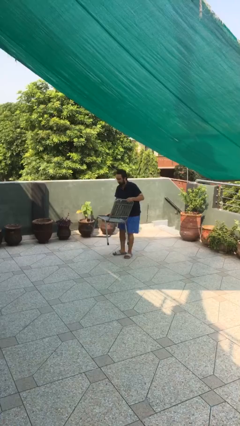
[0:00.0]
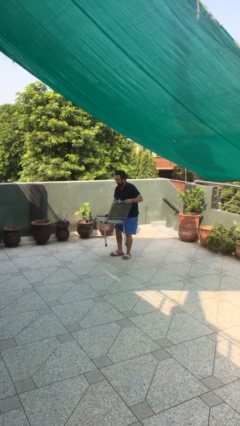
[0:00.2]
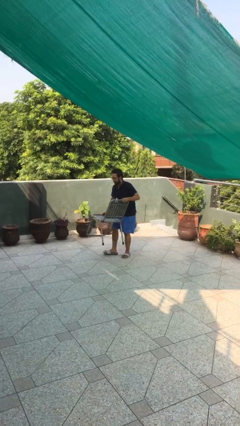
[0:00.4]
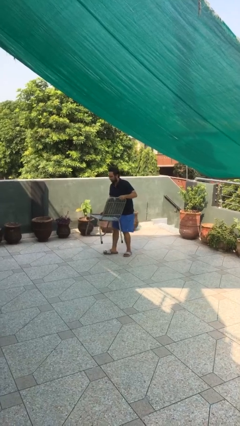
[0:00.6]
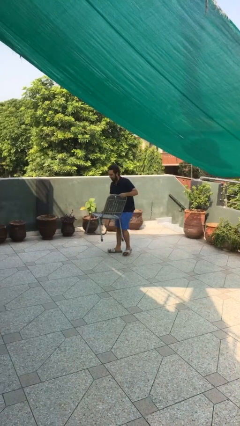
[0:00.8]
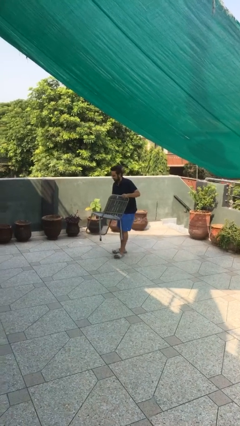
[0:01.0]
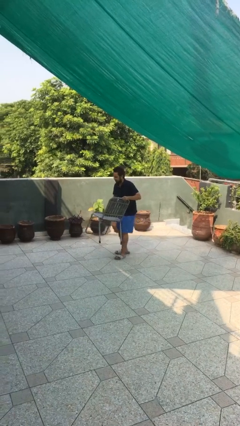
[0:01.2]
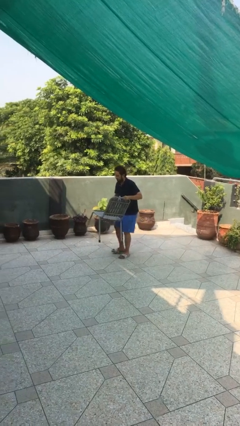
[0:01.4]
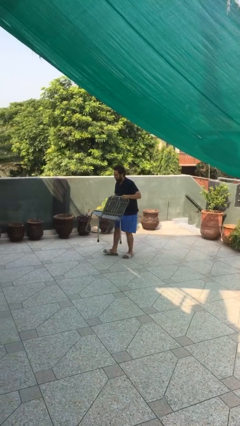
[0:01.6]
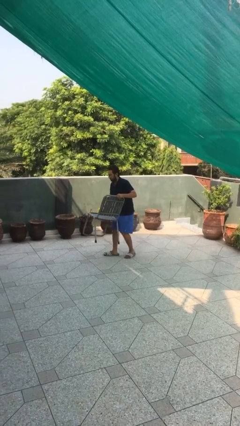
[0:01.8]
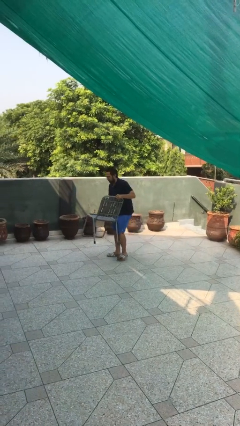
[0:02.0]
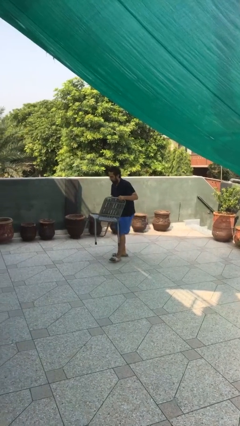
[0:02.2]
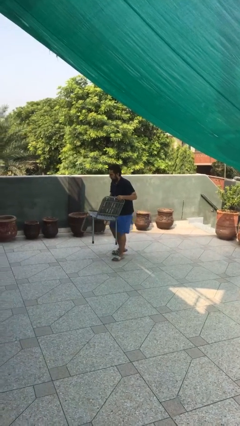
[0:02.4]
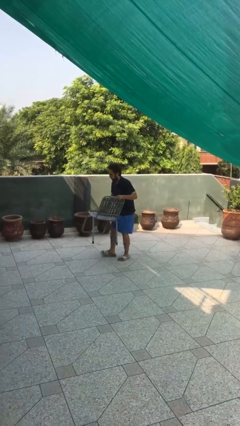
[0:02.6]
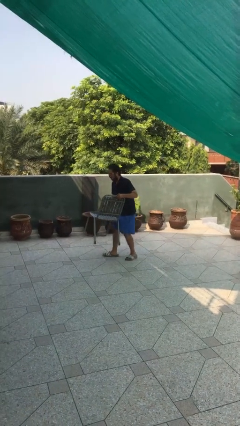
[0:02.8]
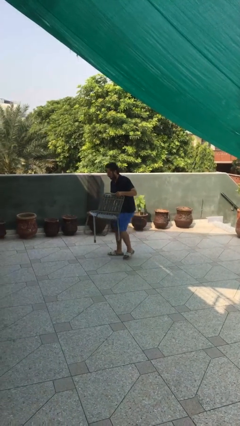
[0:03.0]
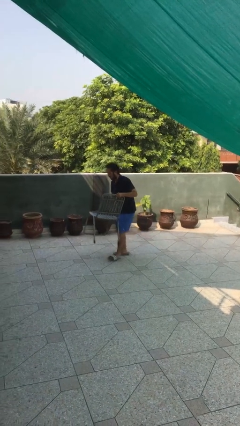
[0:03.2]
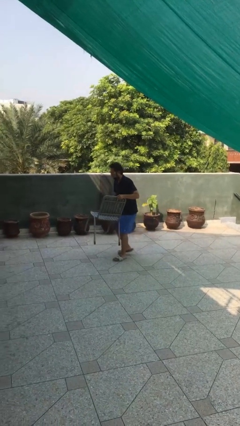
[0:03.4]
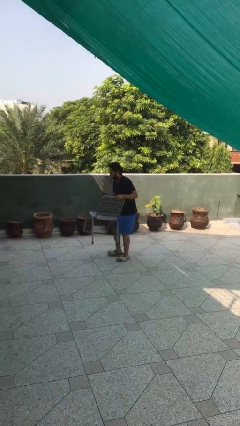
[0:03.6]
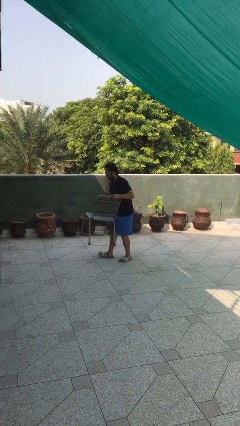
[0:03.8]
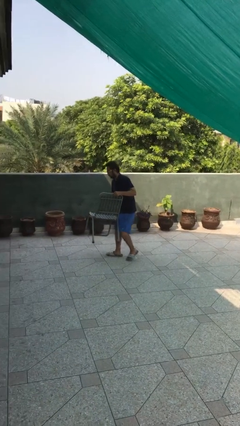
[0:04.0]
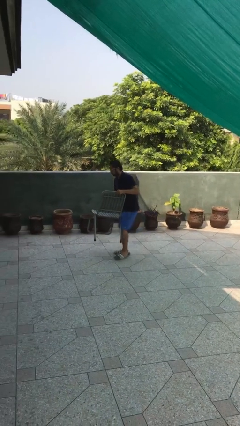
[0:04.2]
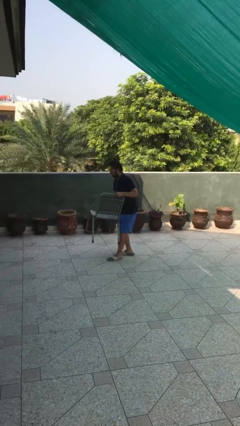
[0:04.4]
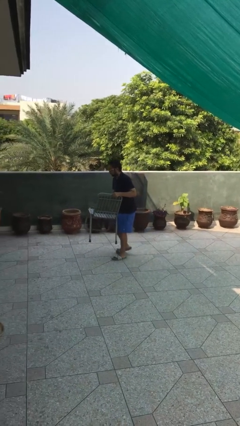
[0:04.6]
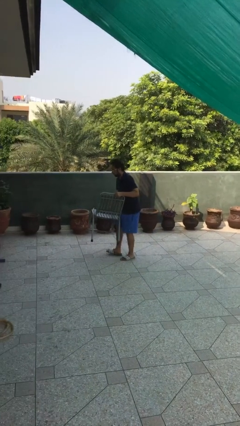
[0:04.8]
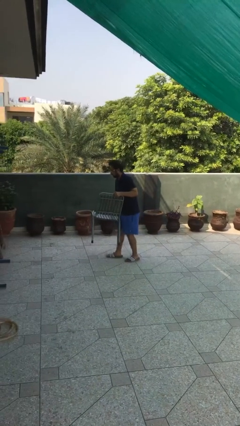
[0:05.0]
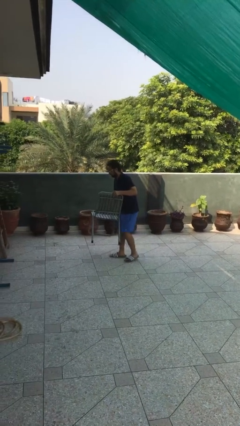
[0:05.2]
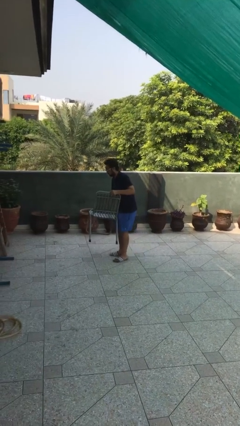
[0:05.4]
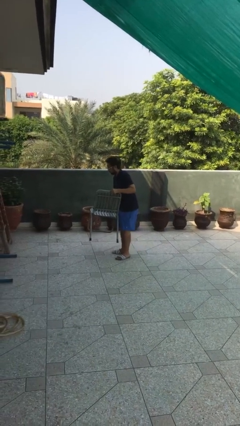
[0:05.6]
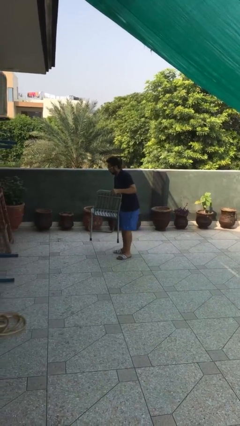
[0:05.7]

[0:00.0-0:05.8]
person carries heavy object

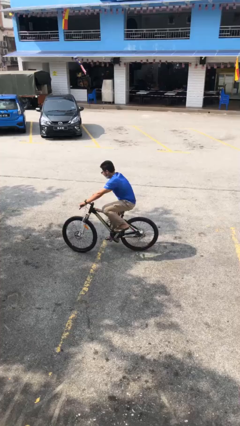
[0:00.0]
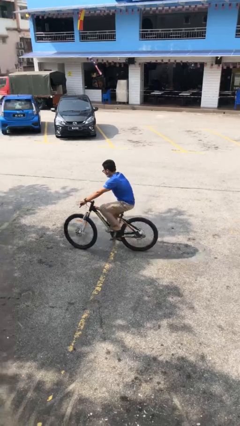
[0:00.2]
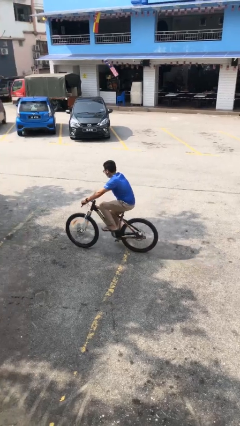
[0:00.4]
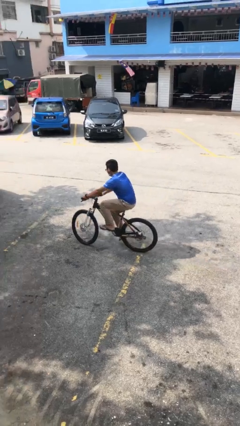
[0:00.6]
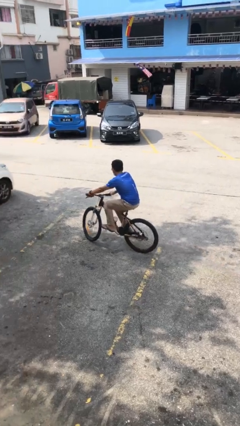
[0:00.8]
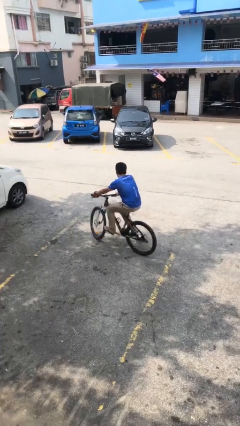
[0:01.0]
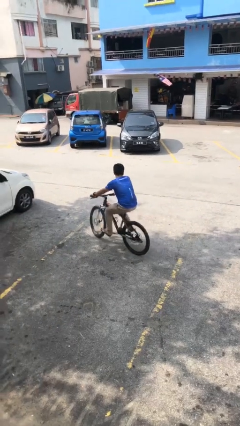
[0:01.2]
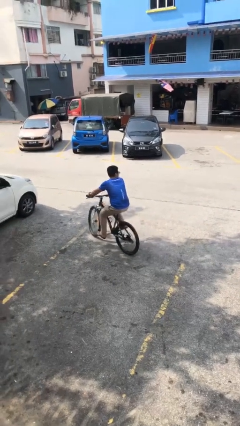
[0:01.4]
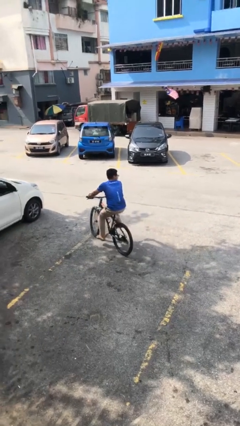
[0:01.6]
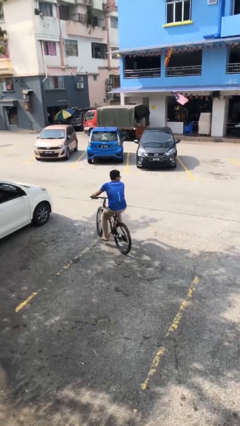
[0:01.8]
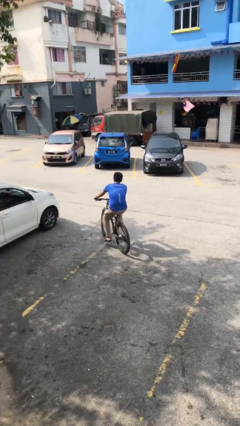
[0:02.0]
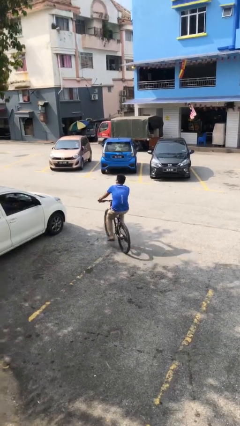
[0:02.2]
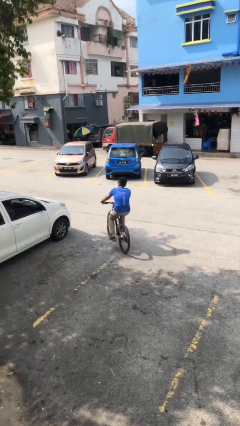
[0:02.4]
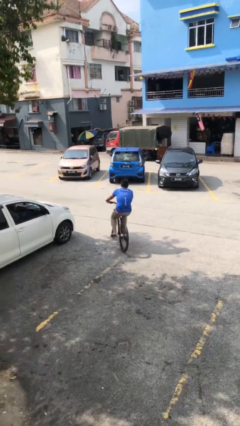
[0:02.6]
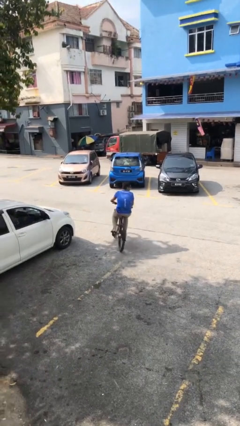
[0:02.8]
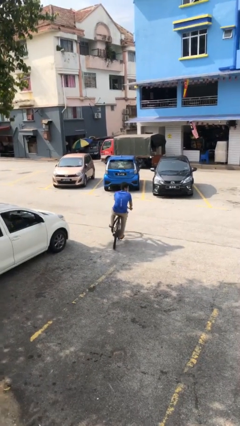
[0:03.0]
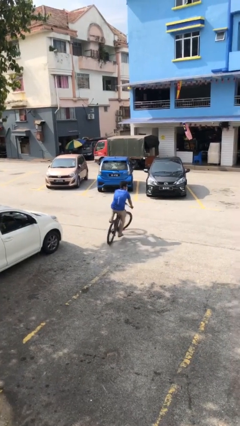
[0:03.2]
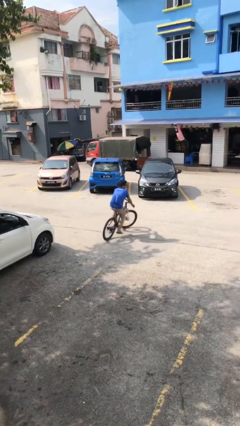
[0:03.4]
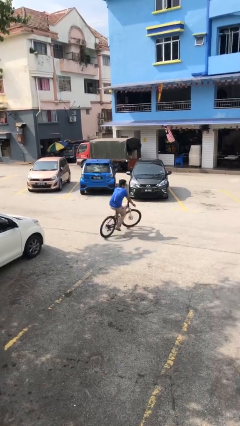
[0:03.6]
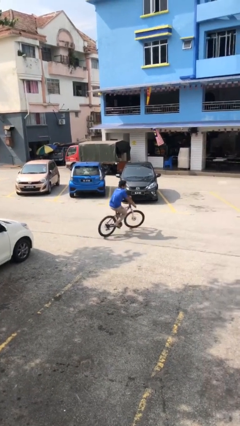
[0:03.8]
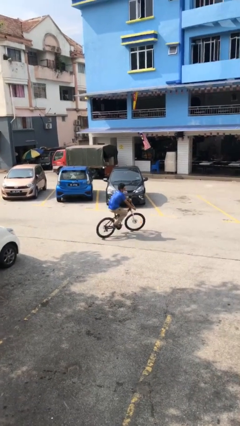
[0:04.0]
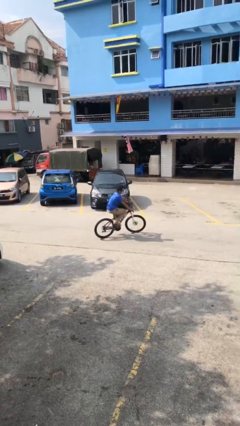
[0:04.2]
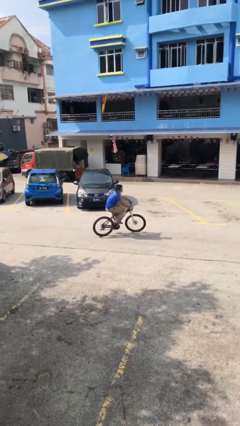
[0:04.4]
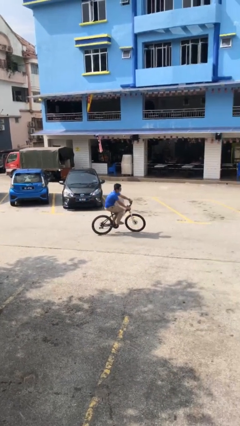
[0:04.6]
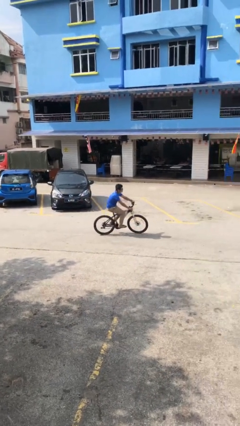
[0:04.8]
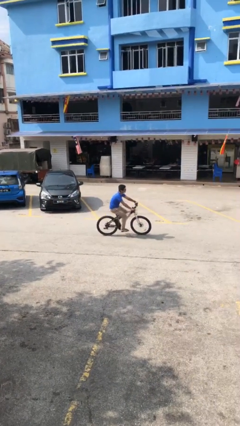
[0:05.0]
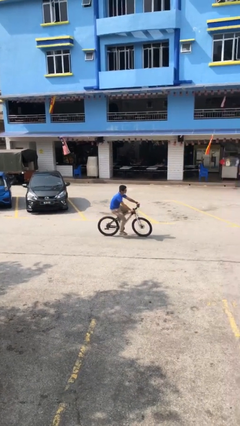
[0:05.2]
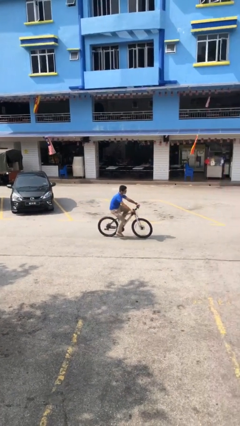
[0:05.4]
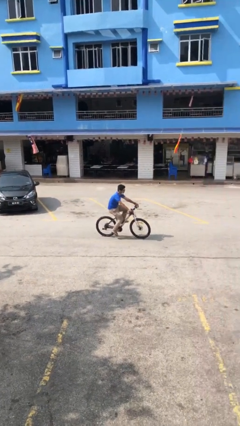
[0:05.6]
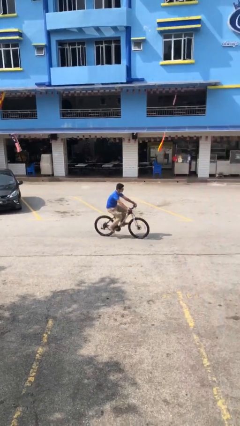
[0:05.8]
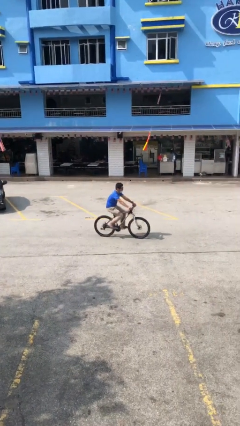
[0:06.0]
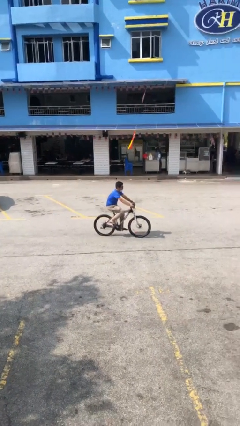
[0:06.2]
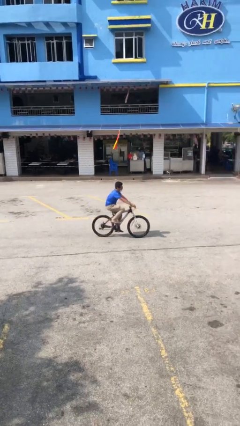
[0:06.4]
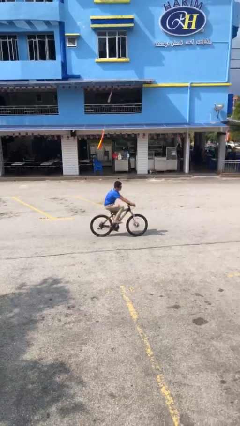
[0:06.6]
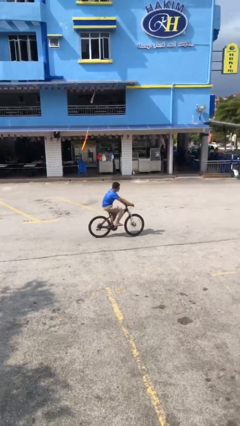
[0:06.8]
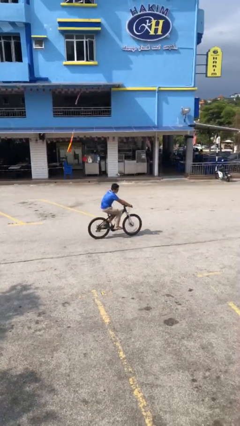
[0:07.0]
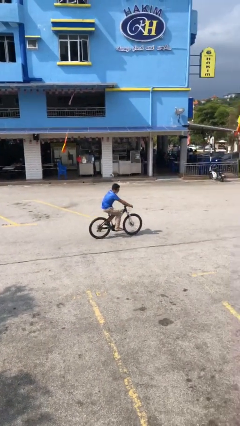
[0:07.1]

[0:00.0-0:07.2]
person rides bicycle

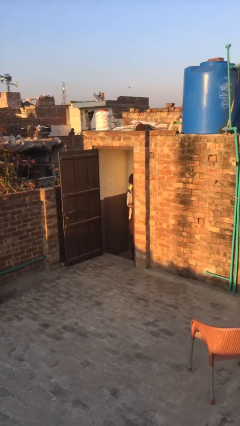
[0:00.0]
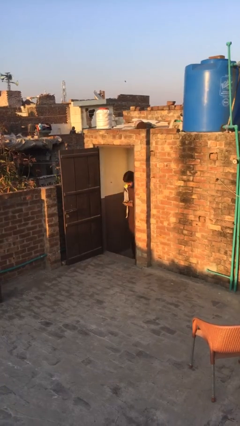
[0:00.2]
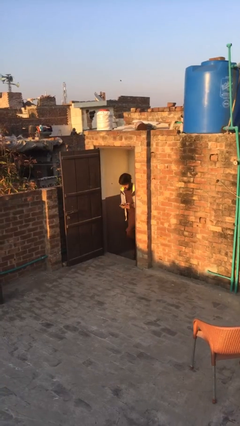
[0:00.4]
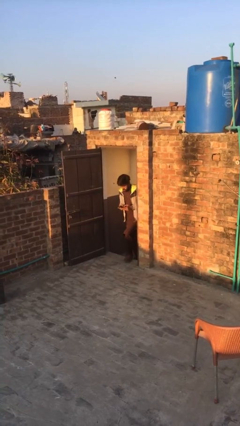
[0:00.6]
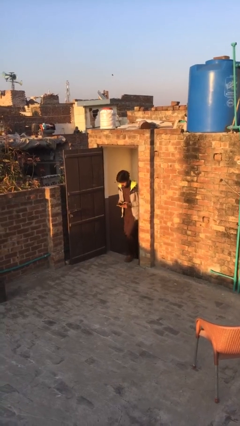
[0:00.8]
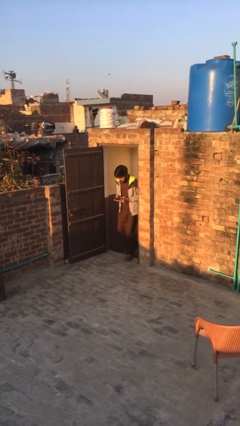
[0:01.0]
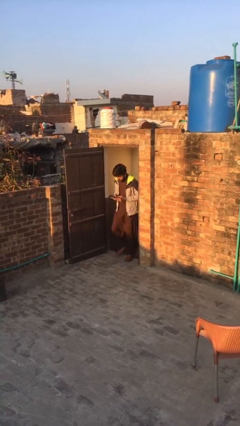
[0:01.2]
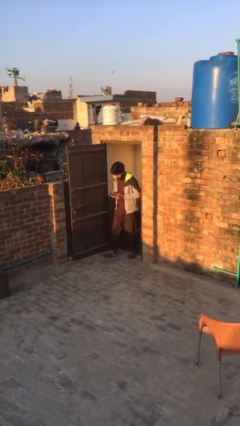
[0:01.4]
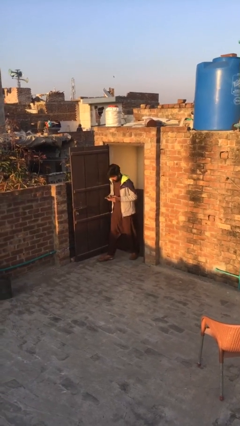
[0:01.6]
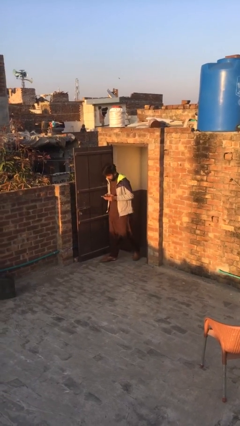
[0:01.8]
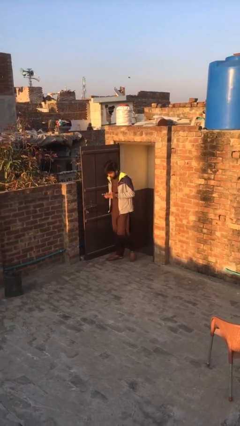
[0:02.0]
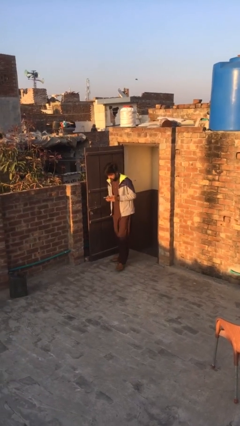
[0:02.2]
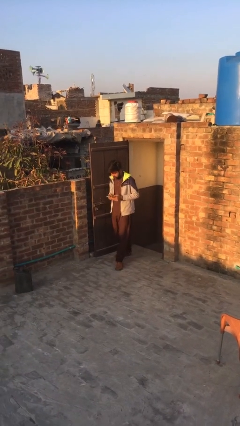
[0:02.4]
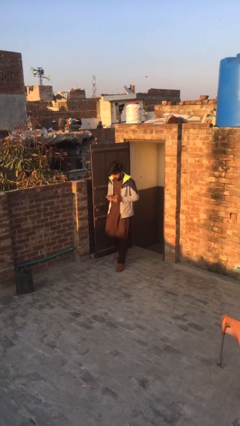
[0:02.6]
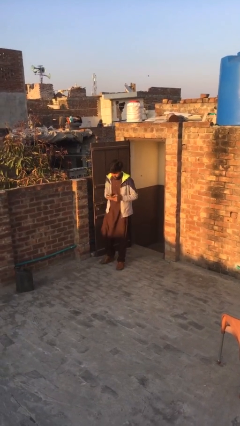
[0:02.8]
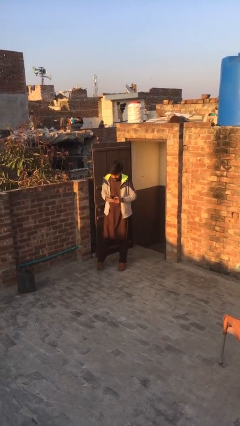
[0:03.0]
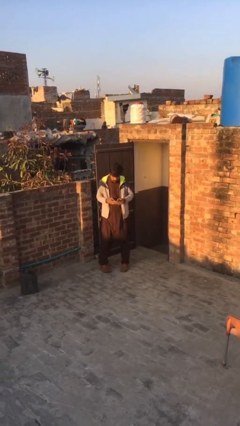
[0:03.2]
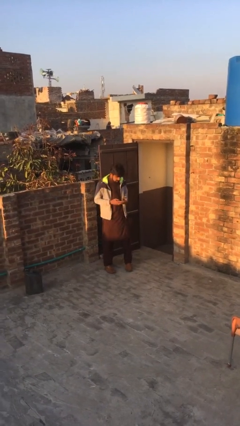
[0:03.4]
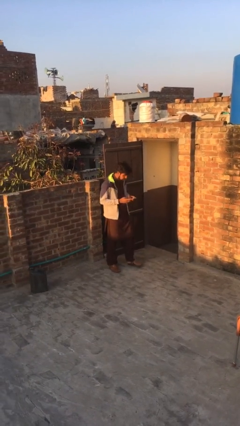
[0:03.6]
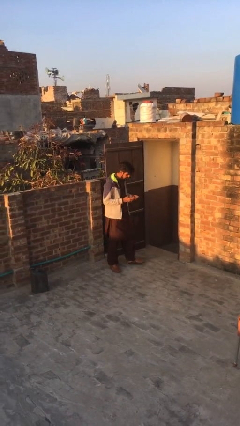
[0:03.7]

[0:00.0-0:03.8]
person exits scene through structure
